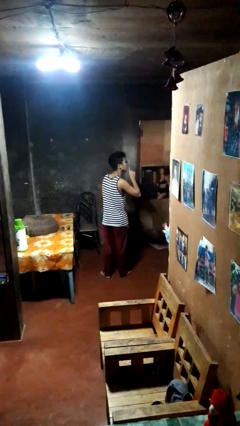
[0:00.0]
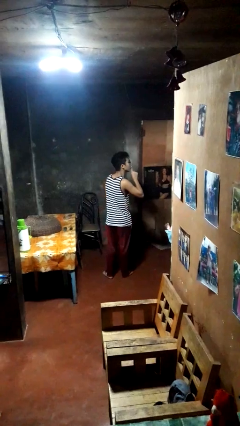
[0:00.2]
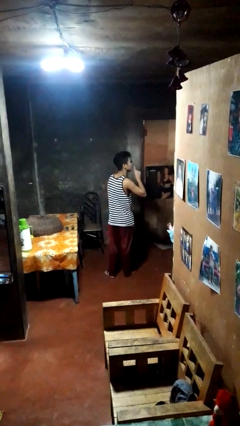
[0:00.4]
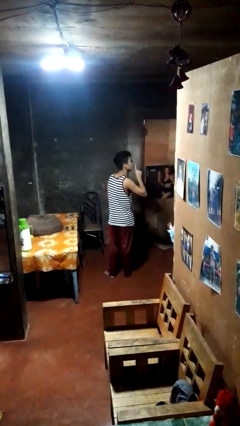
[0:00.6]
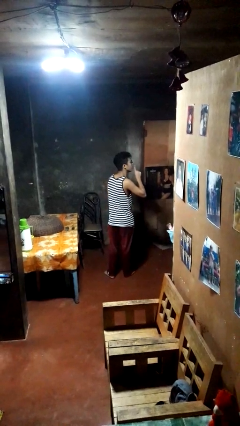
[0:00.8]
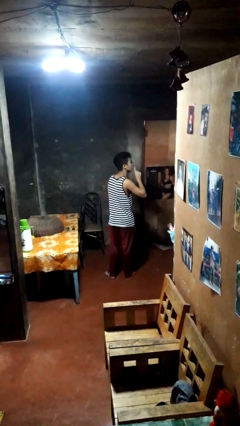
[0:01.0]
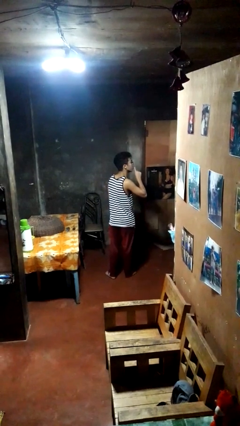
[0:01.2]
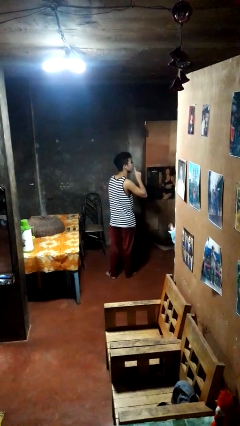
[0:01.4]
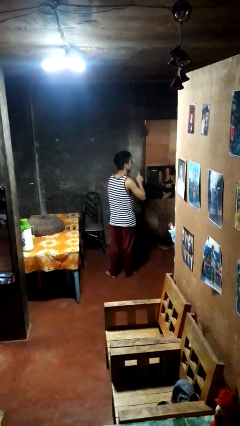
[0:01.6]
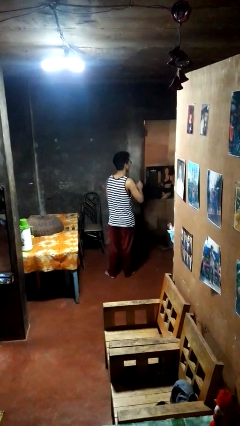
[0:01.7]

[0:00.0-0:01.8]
person gestures be quiet

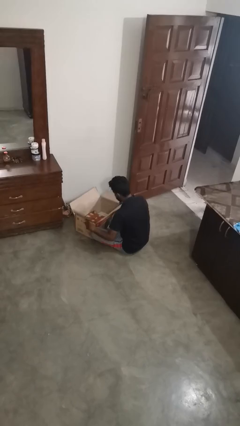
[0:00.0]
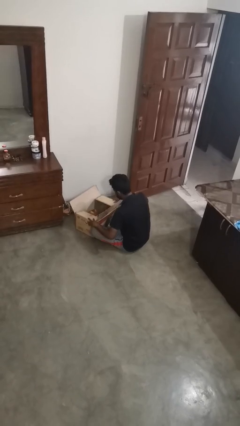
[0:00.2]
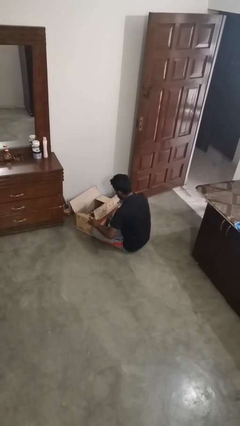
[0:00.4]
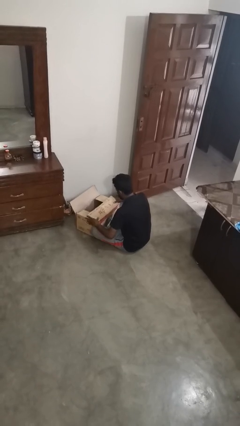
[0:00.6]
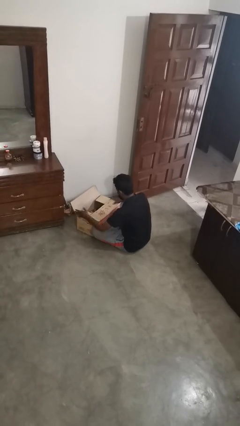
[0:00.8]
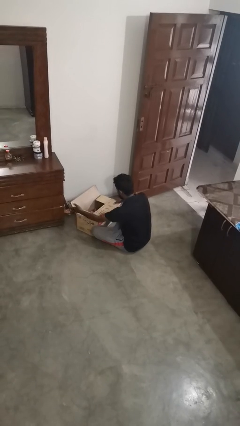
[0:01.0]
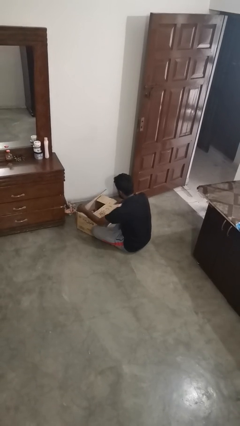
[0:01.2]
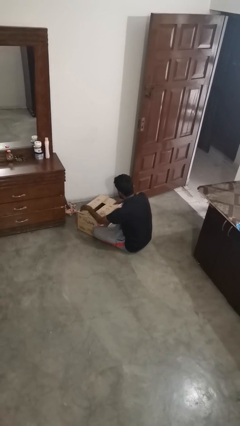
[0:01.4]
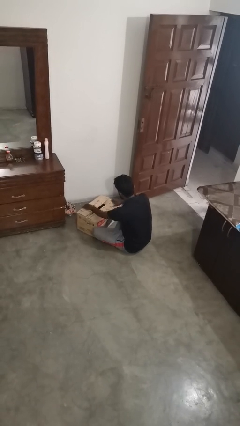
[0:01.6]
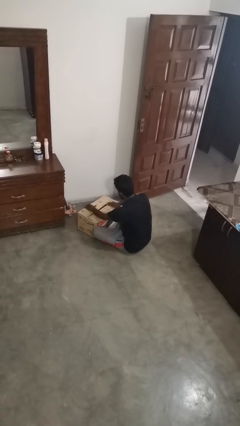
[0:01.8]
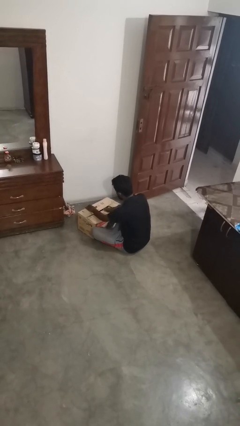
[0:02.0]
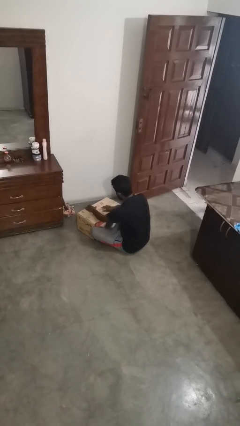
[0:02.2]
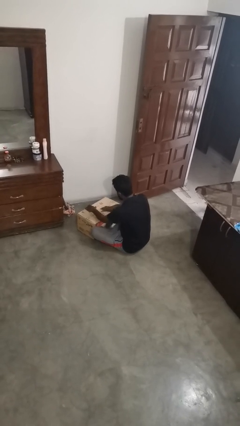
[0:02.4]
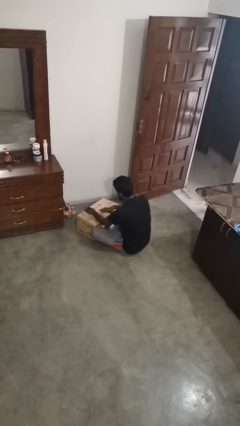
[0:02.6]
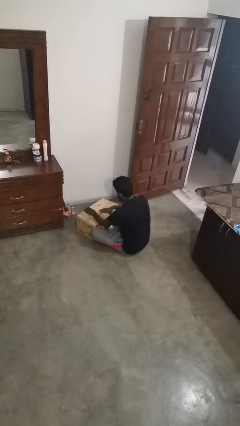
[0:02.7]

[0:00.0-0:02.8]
person closes box

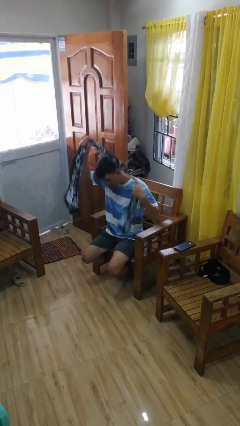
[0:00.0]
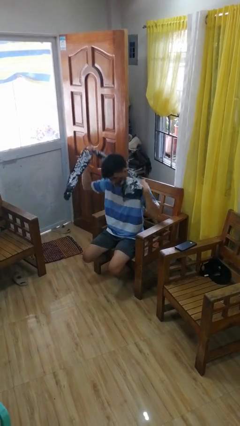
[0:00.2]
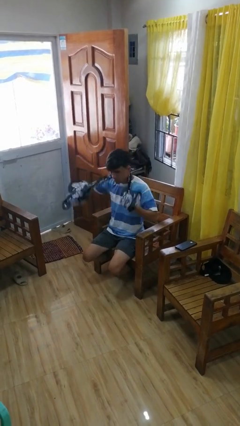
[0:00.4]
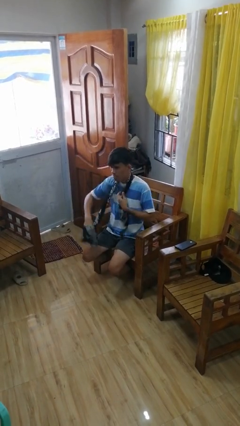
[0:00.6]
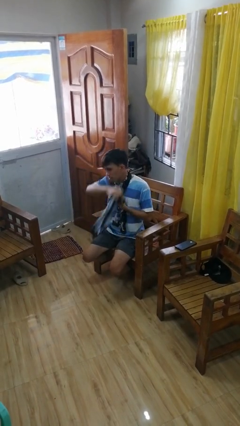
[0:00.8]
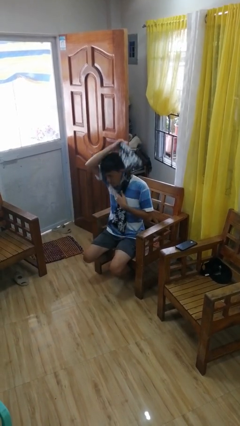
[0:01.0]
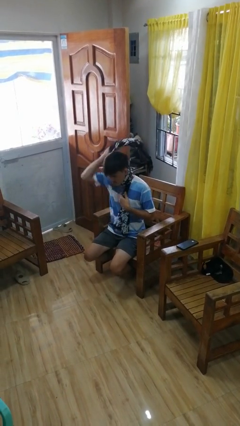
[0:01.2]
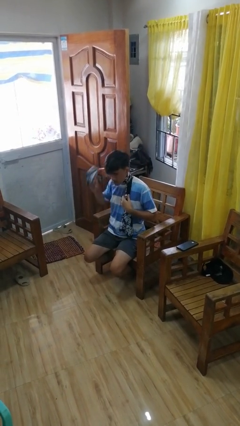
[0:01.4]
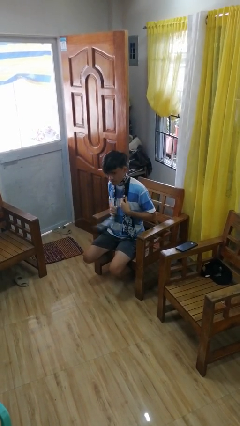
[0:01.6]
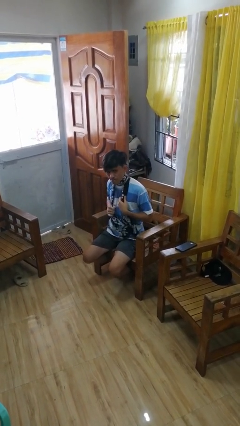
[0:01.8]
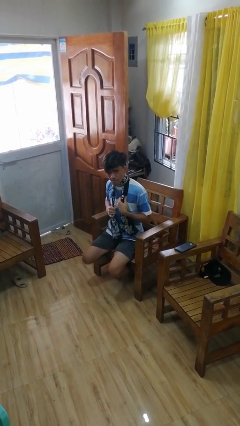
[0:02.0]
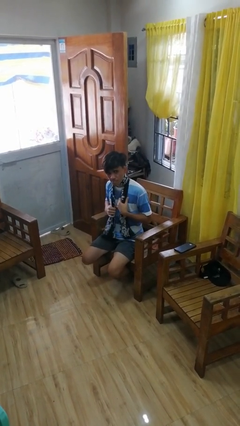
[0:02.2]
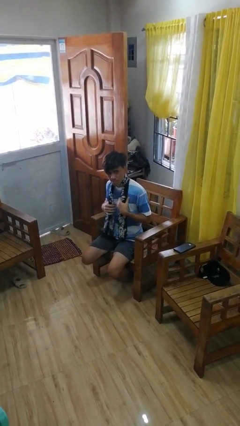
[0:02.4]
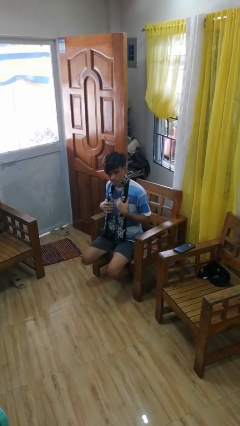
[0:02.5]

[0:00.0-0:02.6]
person puts on scarf

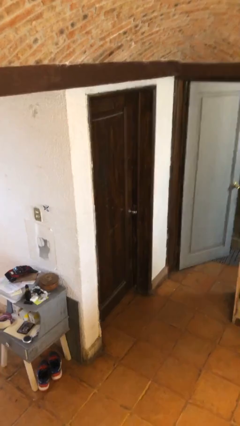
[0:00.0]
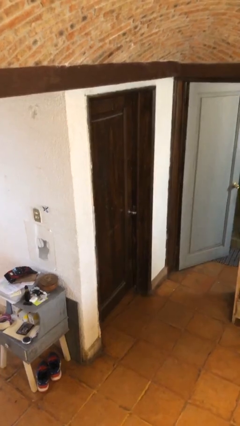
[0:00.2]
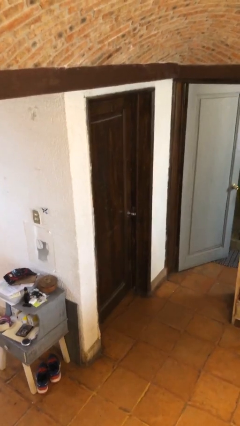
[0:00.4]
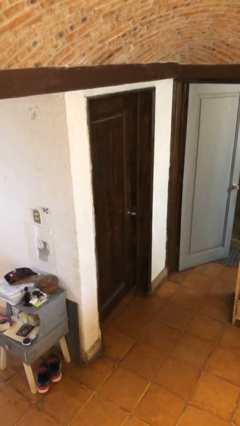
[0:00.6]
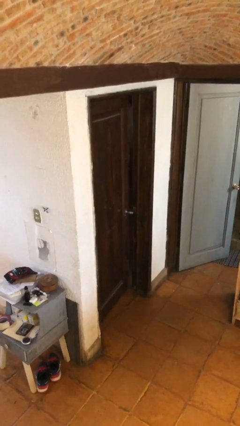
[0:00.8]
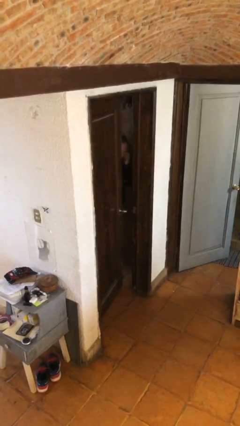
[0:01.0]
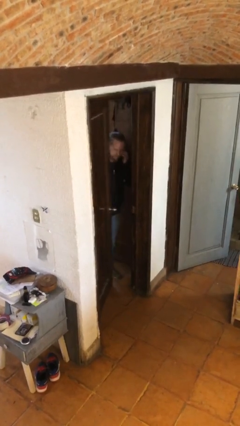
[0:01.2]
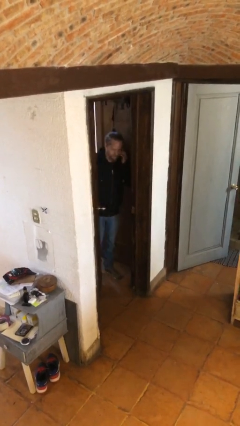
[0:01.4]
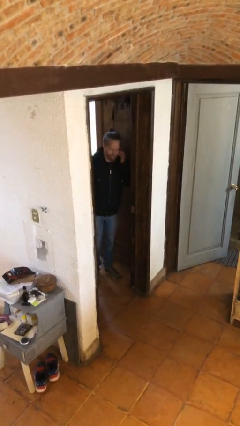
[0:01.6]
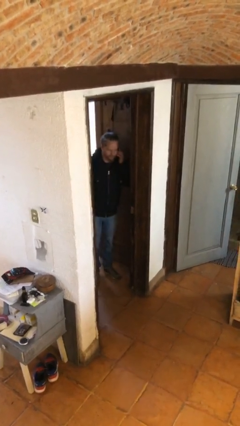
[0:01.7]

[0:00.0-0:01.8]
person opens facility door

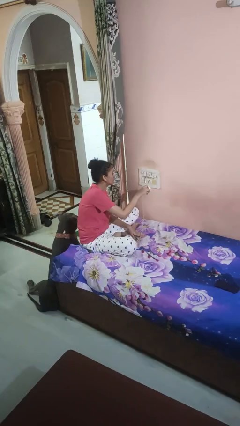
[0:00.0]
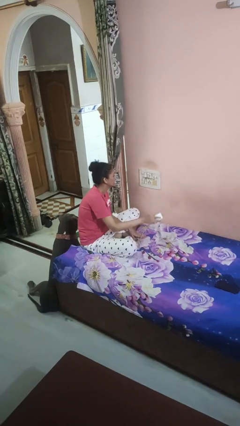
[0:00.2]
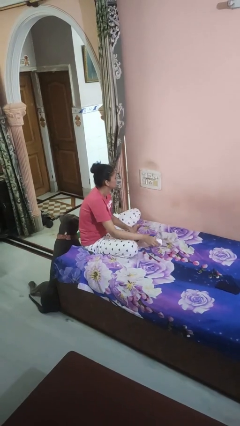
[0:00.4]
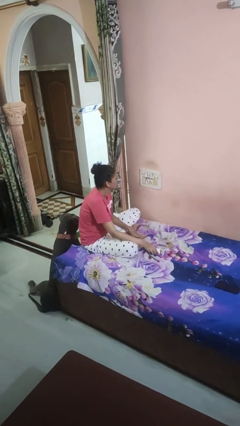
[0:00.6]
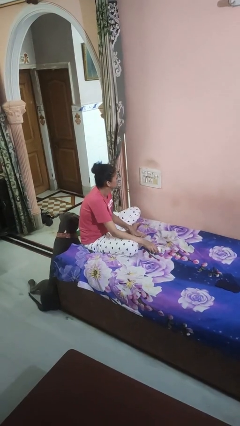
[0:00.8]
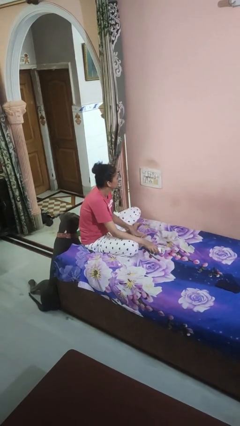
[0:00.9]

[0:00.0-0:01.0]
person unplugs from electrical socket

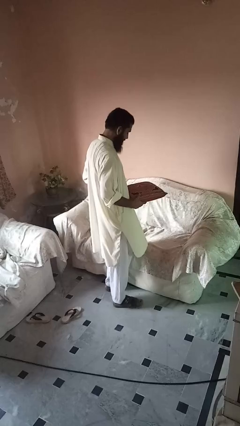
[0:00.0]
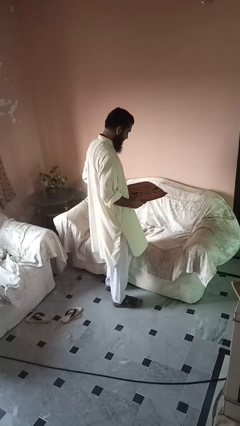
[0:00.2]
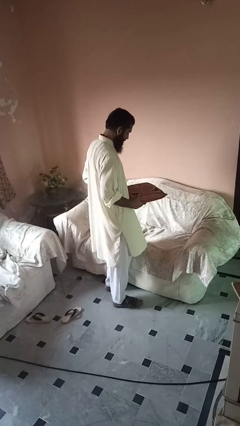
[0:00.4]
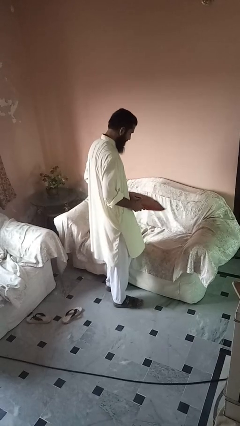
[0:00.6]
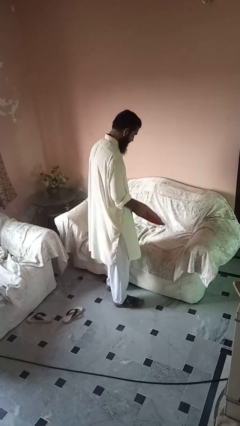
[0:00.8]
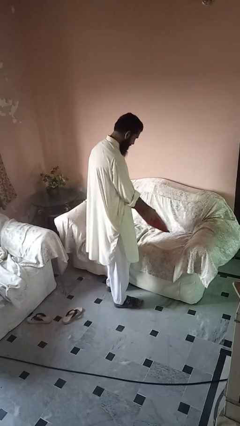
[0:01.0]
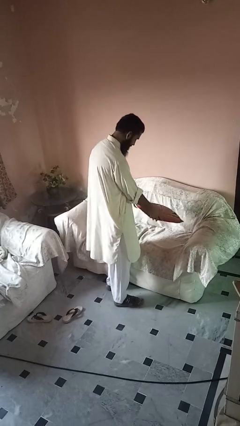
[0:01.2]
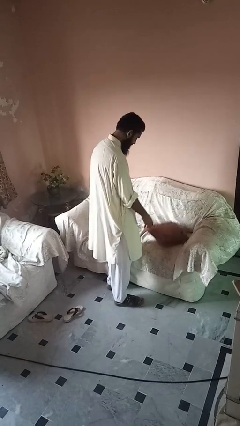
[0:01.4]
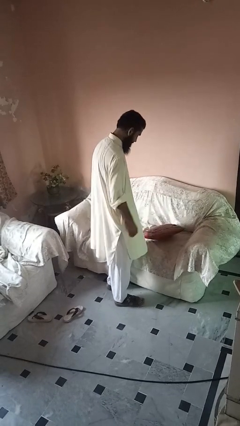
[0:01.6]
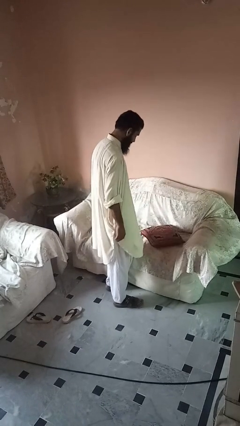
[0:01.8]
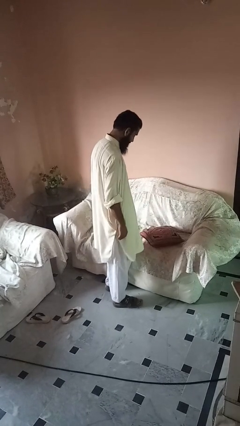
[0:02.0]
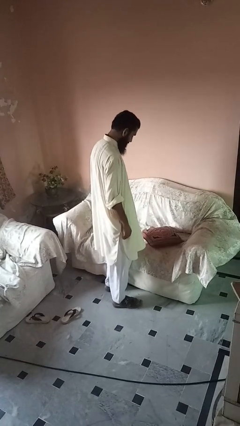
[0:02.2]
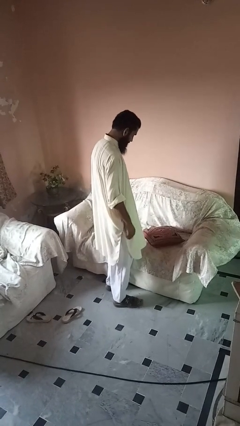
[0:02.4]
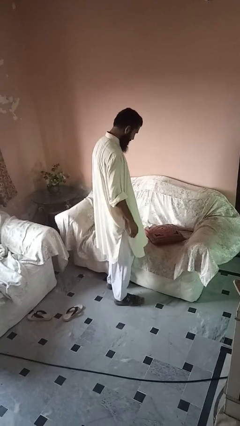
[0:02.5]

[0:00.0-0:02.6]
person puts down object on couch

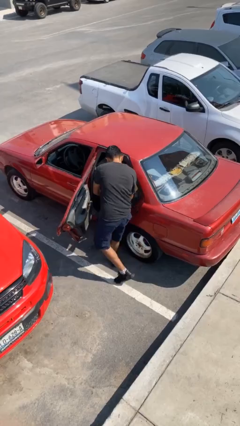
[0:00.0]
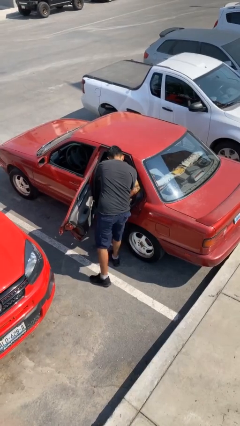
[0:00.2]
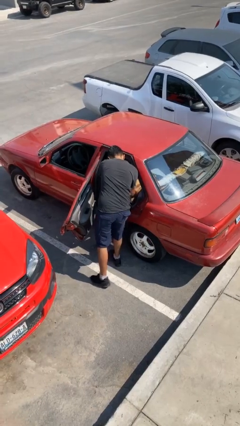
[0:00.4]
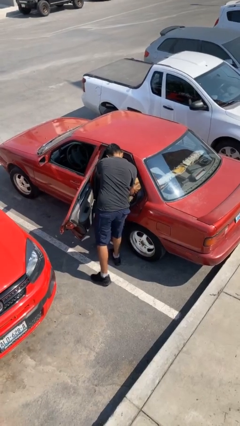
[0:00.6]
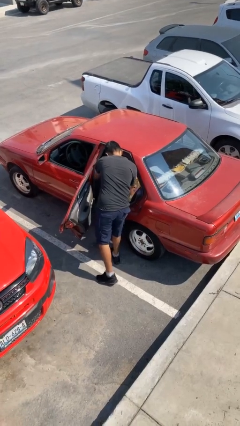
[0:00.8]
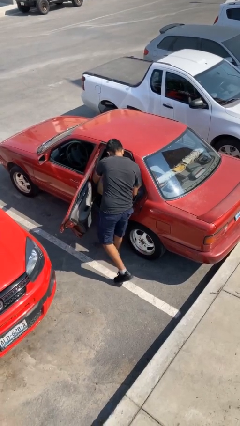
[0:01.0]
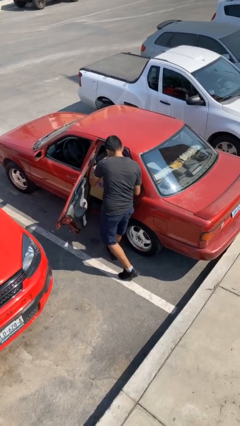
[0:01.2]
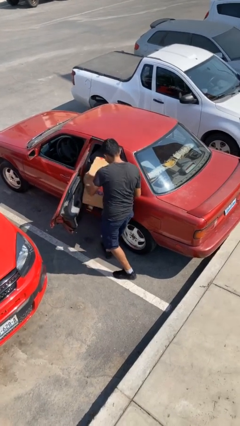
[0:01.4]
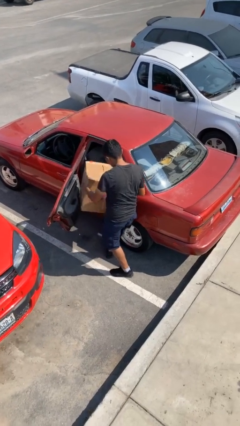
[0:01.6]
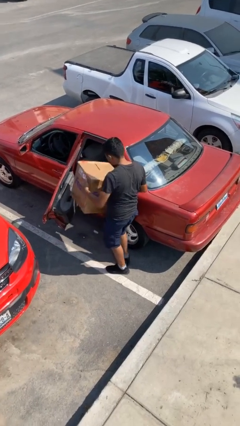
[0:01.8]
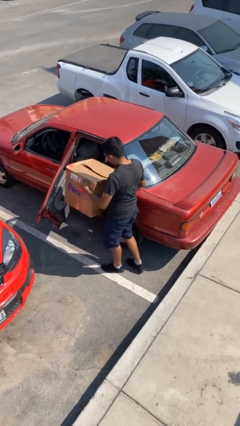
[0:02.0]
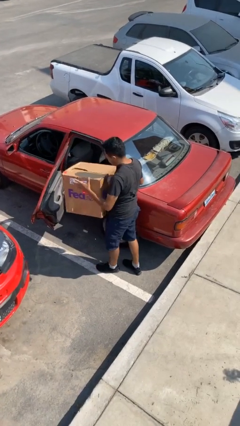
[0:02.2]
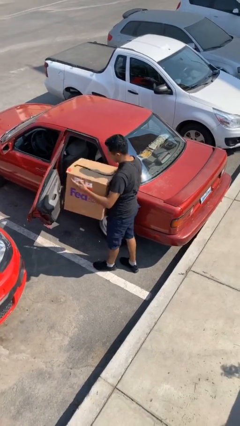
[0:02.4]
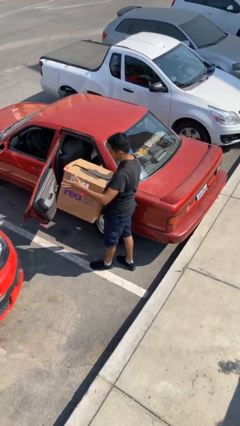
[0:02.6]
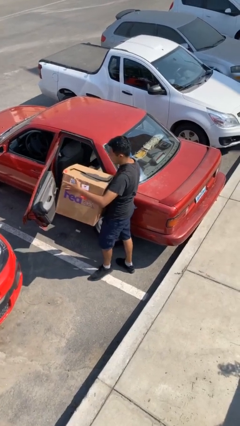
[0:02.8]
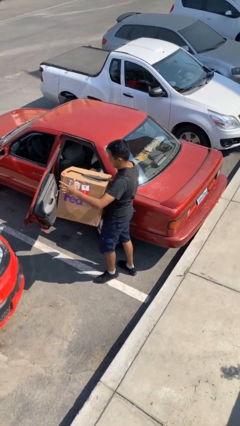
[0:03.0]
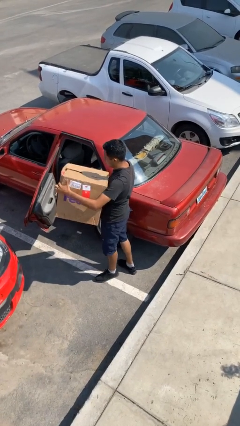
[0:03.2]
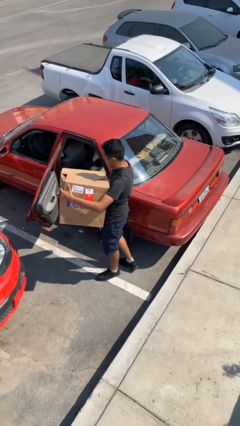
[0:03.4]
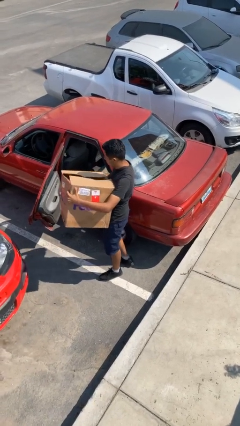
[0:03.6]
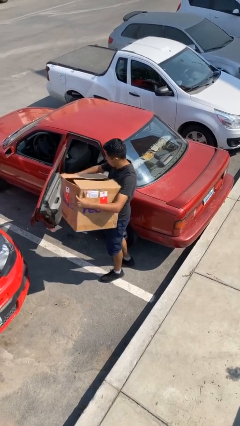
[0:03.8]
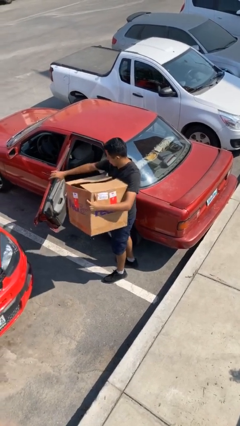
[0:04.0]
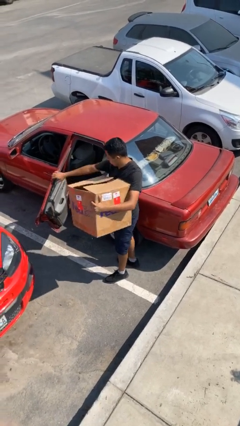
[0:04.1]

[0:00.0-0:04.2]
person unloads car
